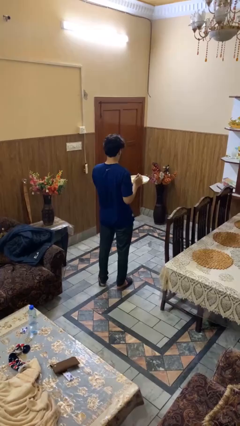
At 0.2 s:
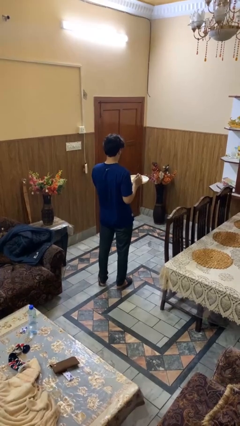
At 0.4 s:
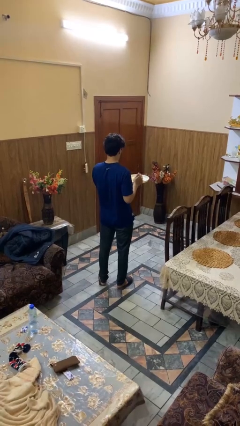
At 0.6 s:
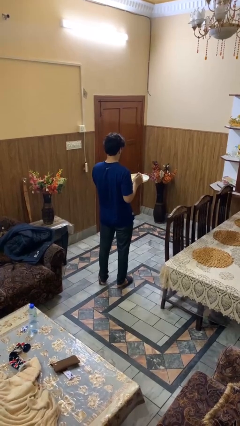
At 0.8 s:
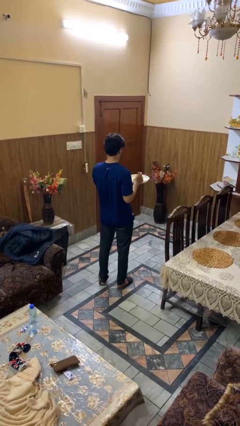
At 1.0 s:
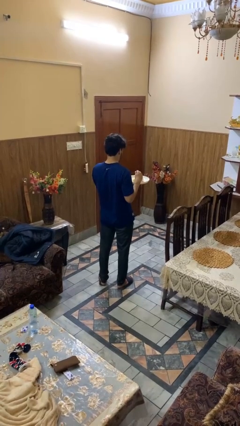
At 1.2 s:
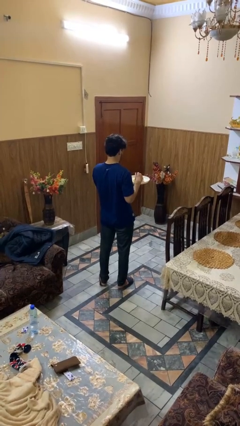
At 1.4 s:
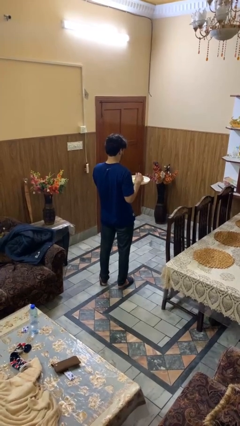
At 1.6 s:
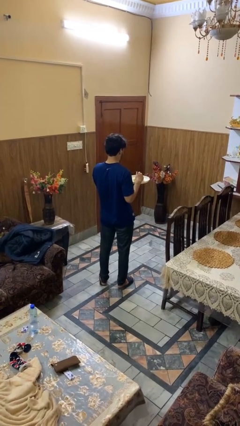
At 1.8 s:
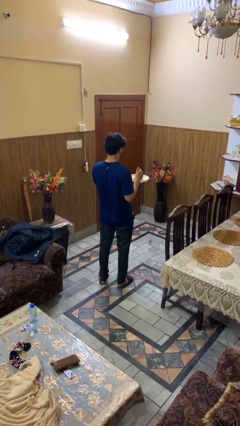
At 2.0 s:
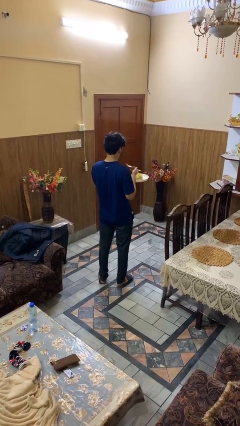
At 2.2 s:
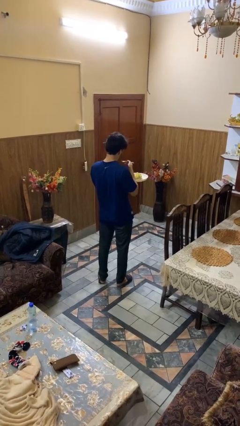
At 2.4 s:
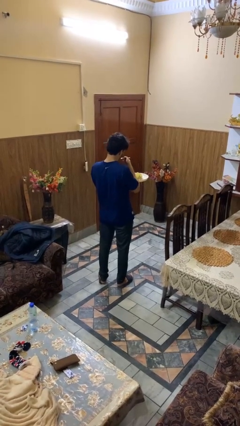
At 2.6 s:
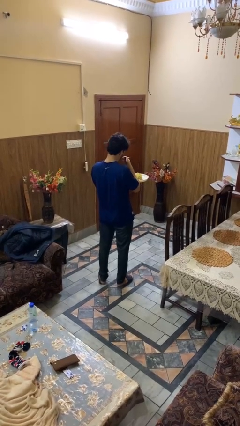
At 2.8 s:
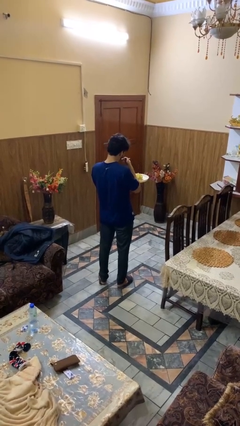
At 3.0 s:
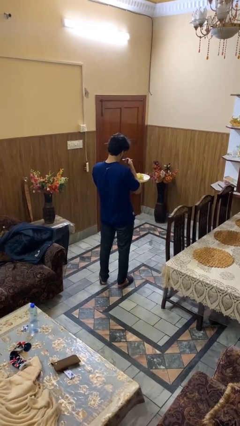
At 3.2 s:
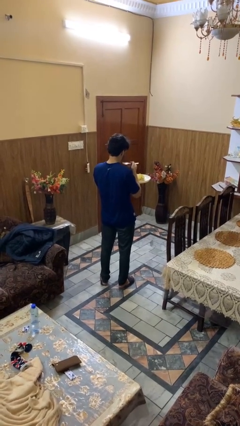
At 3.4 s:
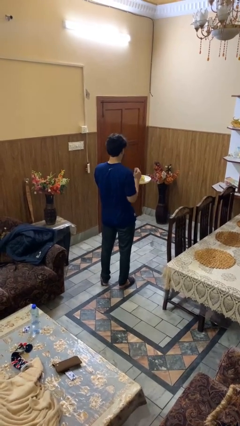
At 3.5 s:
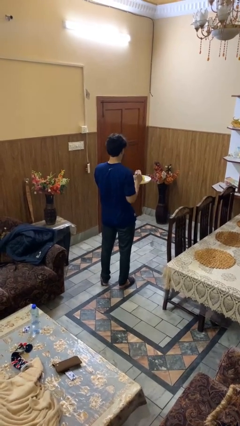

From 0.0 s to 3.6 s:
person eats with utensil

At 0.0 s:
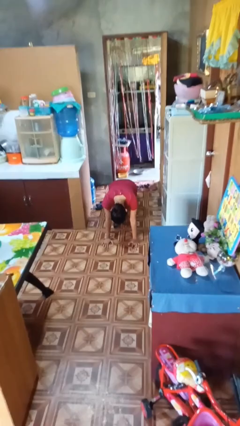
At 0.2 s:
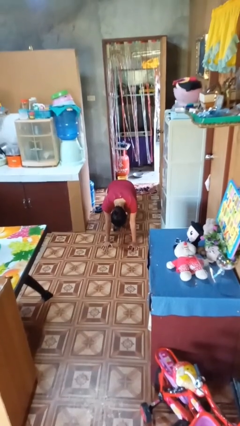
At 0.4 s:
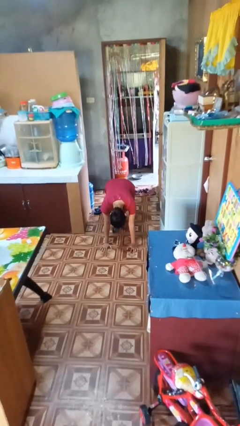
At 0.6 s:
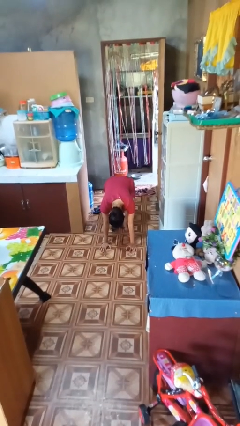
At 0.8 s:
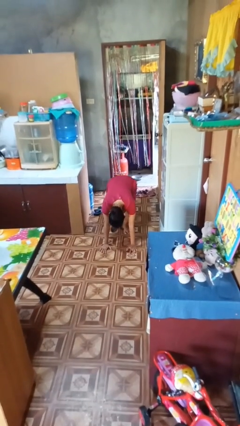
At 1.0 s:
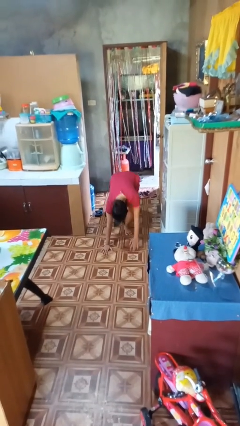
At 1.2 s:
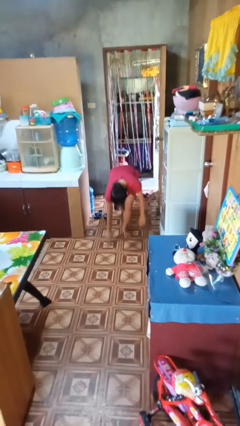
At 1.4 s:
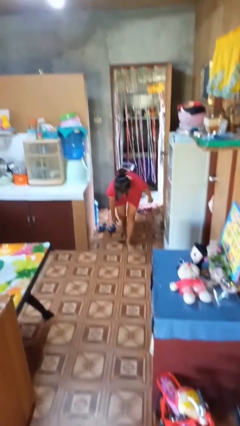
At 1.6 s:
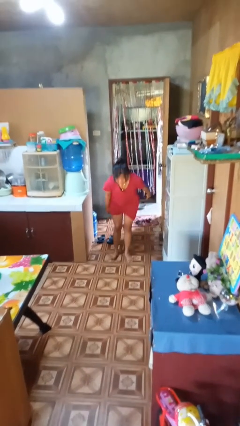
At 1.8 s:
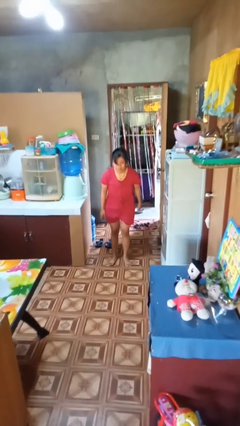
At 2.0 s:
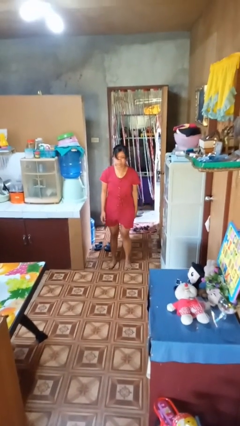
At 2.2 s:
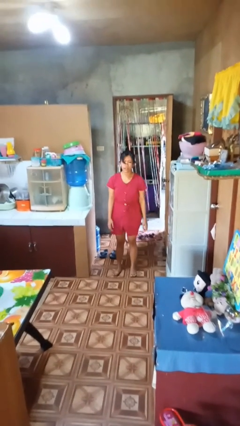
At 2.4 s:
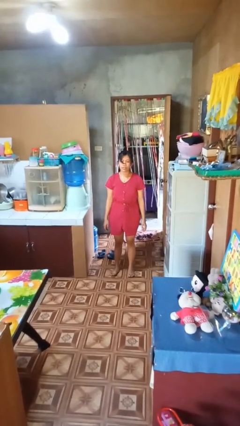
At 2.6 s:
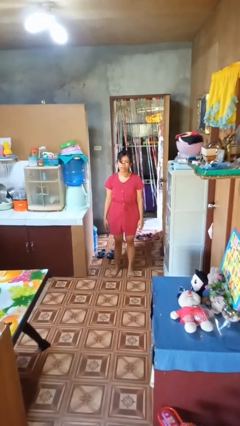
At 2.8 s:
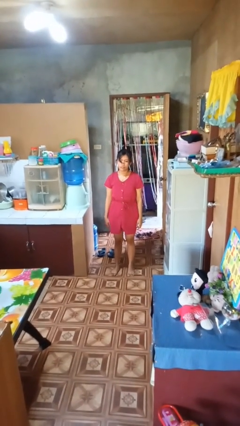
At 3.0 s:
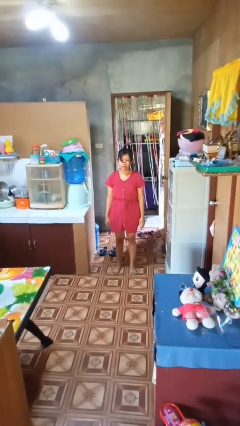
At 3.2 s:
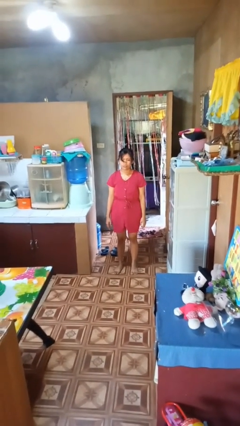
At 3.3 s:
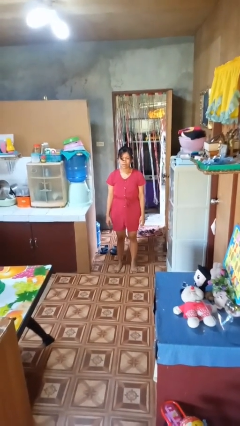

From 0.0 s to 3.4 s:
person stands up from floor

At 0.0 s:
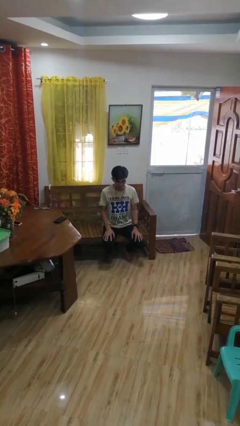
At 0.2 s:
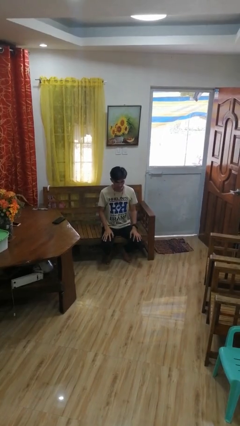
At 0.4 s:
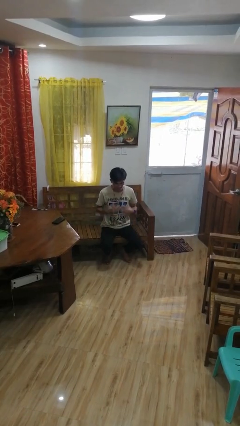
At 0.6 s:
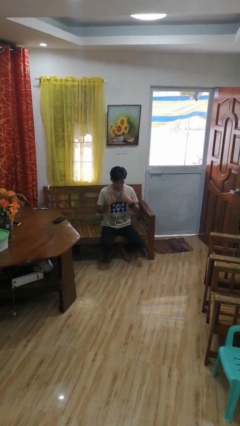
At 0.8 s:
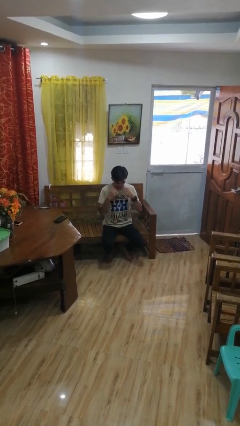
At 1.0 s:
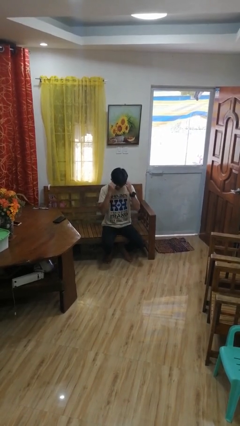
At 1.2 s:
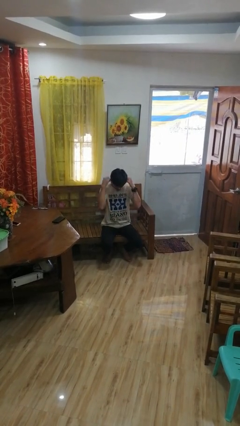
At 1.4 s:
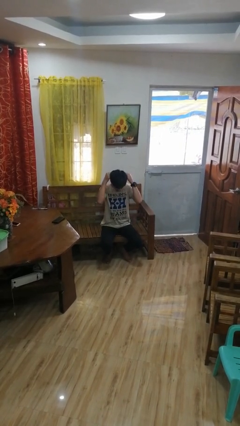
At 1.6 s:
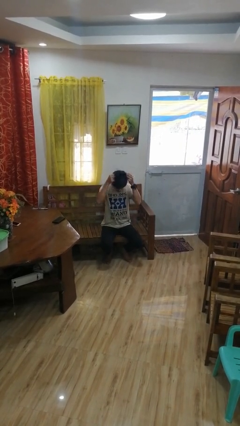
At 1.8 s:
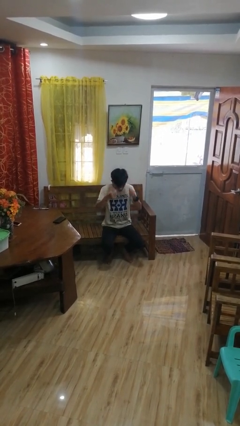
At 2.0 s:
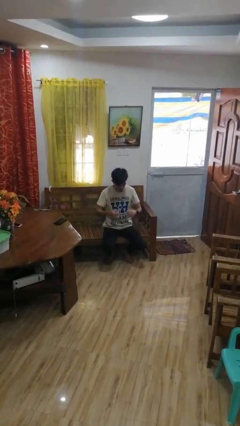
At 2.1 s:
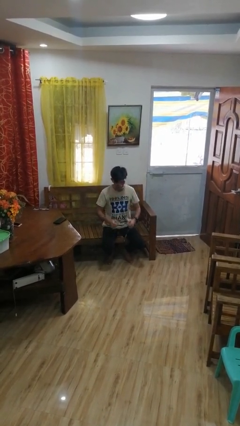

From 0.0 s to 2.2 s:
person takes off necklace

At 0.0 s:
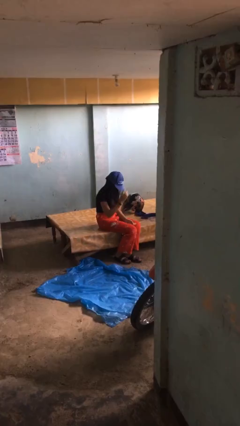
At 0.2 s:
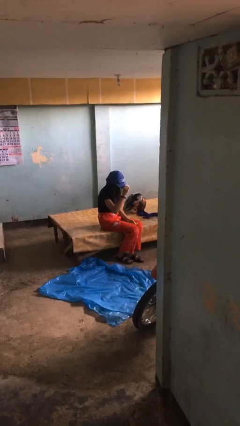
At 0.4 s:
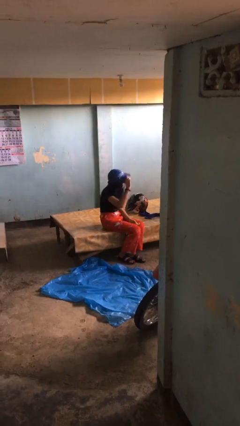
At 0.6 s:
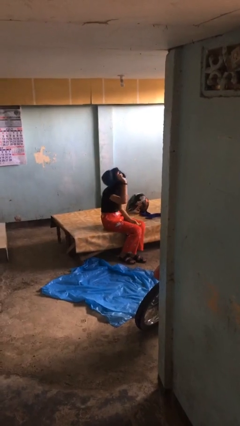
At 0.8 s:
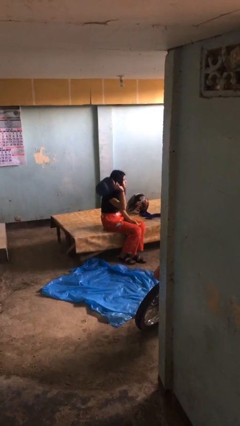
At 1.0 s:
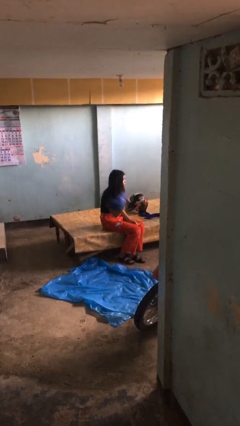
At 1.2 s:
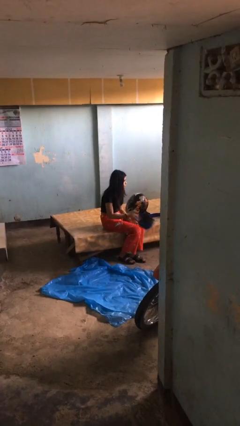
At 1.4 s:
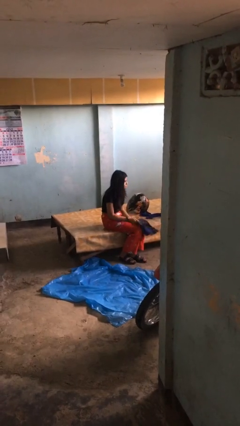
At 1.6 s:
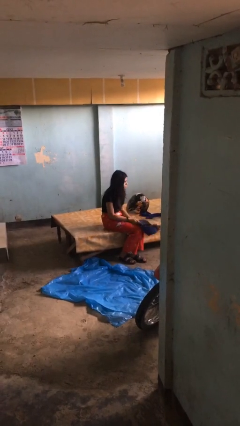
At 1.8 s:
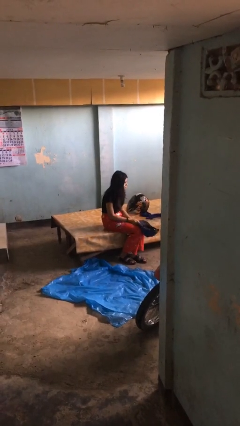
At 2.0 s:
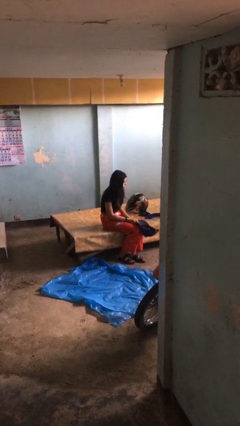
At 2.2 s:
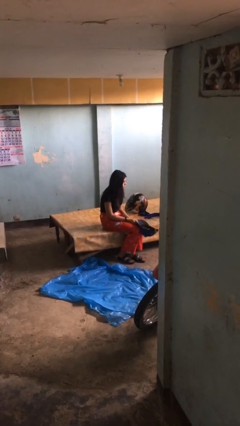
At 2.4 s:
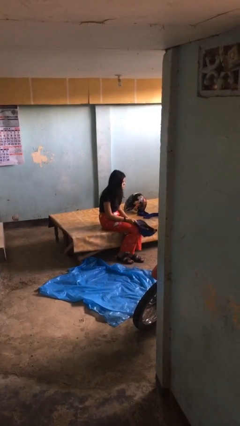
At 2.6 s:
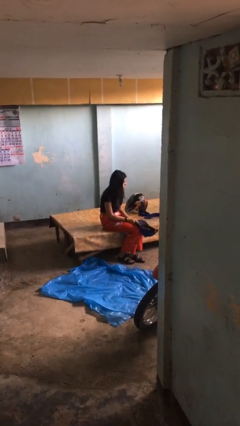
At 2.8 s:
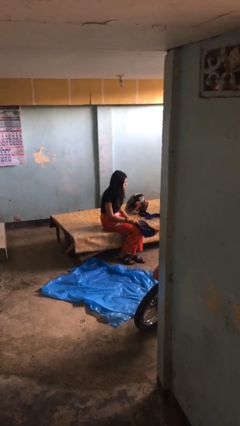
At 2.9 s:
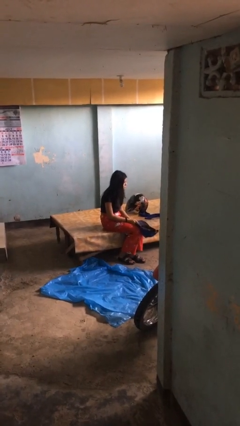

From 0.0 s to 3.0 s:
person takes off hat

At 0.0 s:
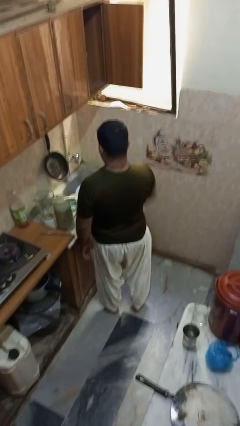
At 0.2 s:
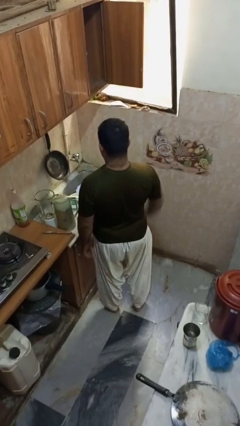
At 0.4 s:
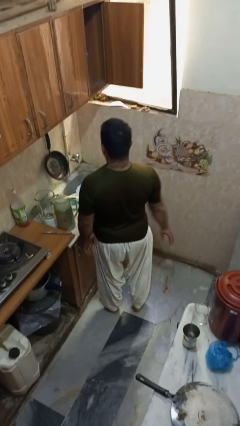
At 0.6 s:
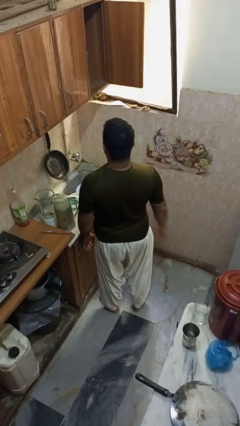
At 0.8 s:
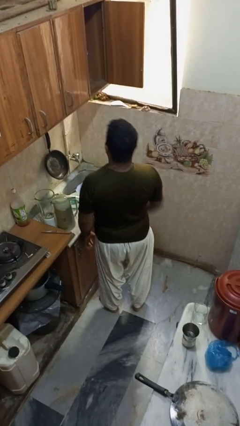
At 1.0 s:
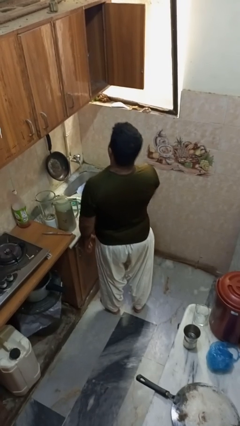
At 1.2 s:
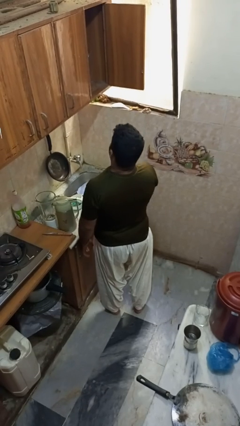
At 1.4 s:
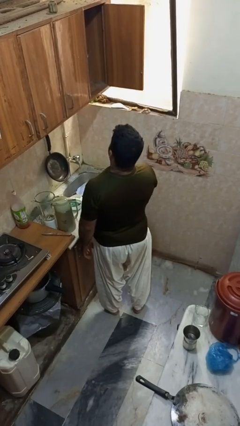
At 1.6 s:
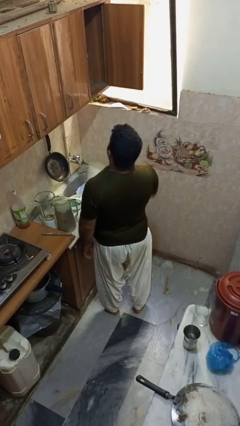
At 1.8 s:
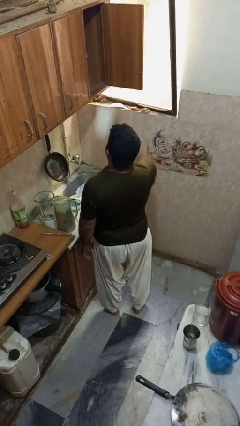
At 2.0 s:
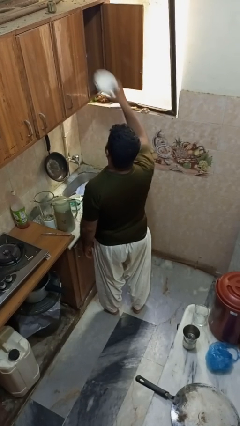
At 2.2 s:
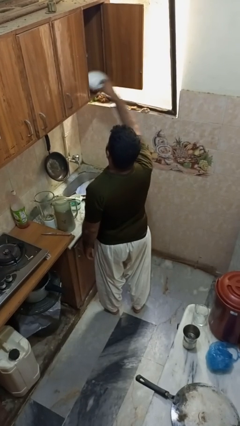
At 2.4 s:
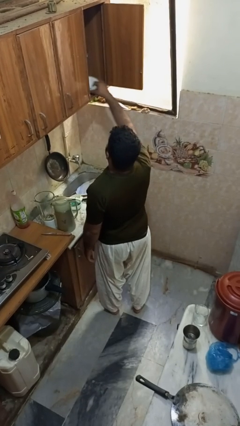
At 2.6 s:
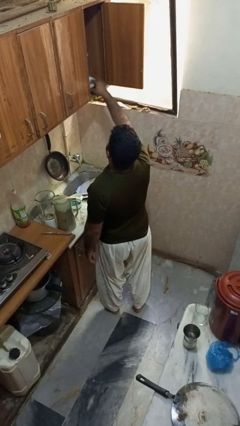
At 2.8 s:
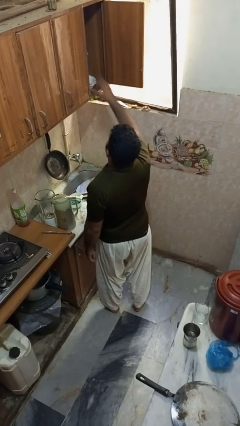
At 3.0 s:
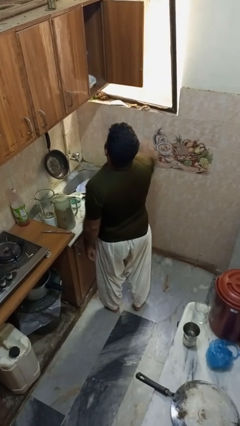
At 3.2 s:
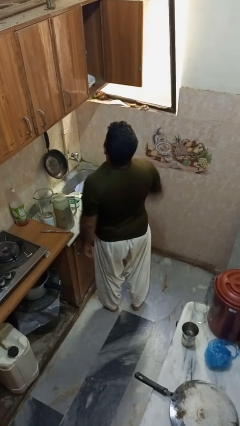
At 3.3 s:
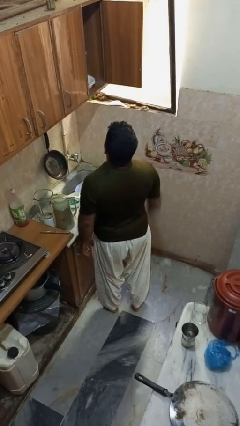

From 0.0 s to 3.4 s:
person puts object in cabinet

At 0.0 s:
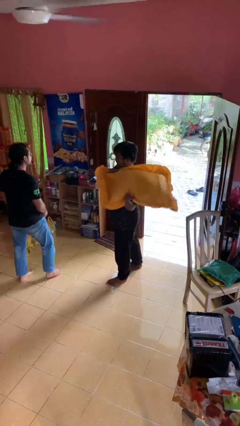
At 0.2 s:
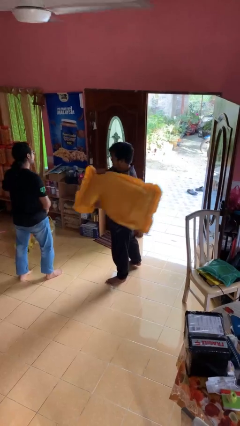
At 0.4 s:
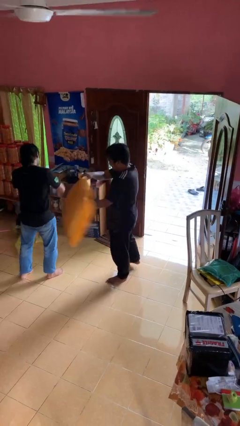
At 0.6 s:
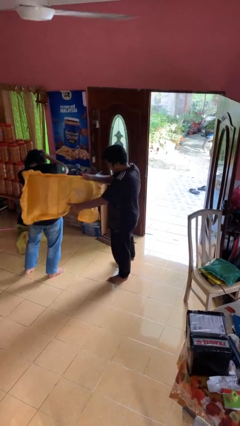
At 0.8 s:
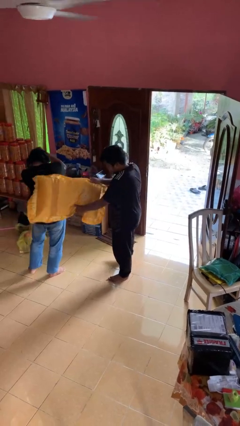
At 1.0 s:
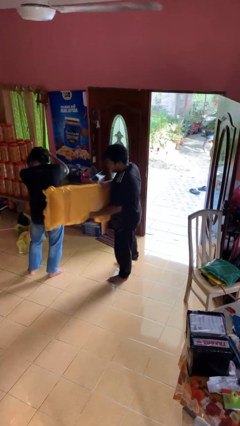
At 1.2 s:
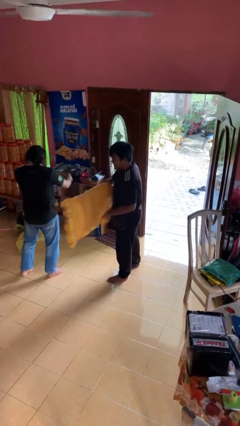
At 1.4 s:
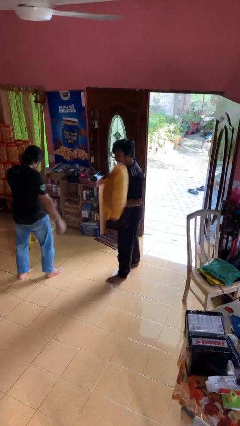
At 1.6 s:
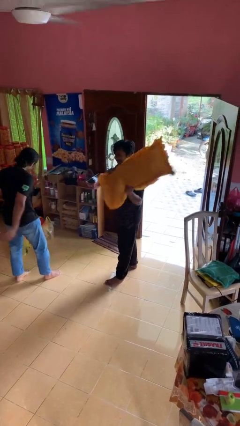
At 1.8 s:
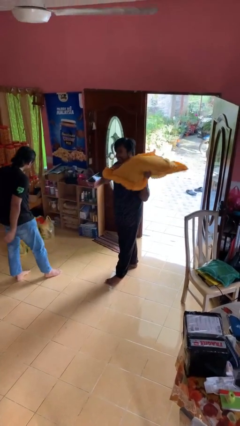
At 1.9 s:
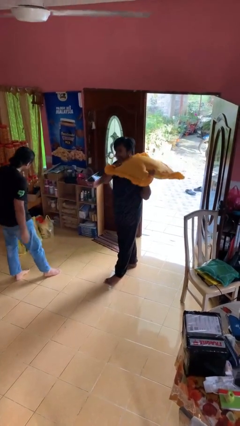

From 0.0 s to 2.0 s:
person hits person with pillow
